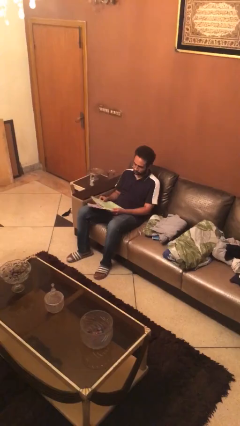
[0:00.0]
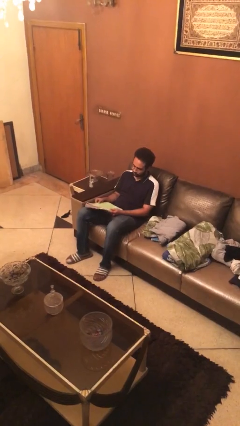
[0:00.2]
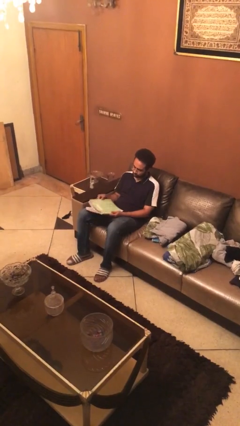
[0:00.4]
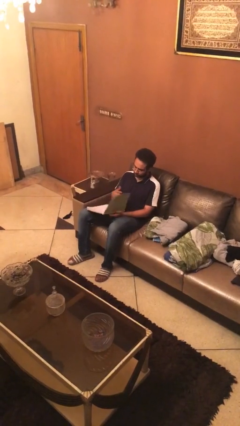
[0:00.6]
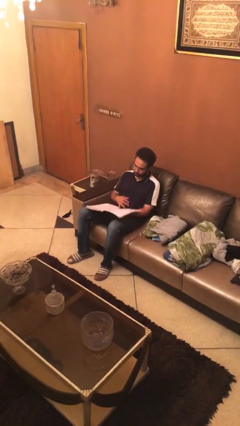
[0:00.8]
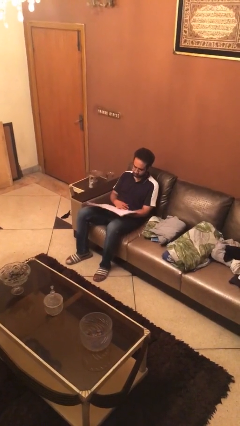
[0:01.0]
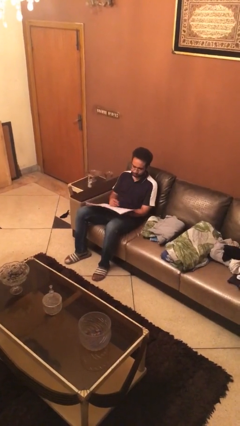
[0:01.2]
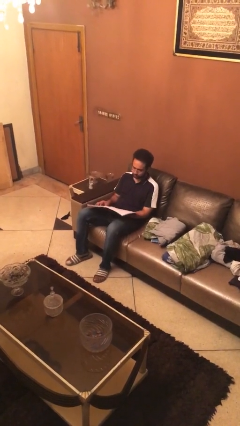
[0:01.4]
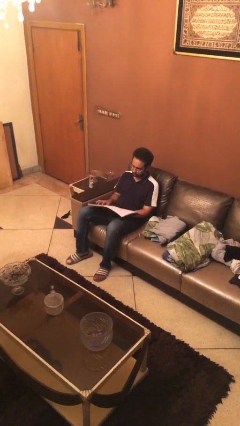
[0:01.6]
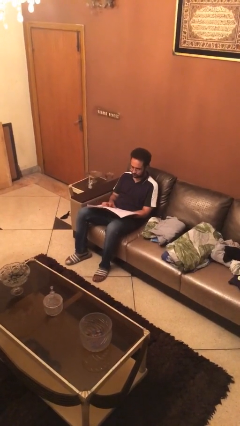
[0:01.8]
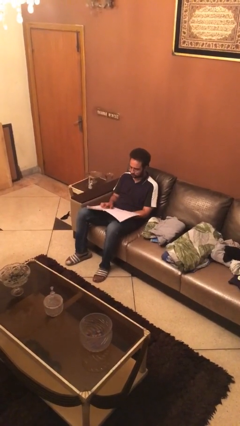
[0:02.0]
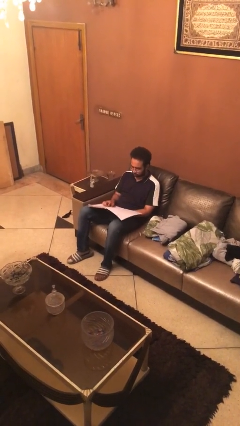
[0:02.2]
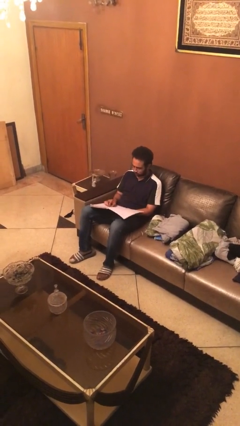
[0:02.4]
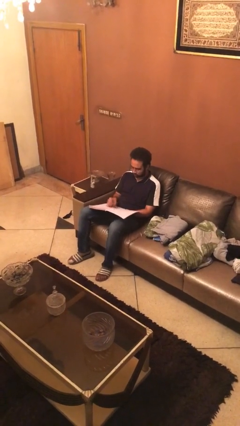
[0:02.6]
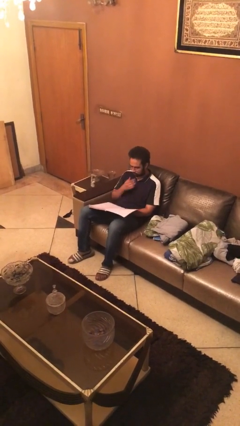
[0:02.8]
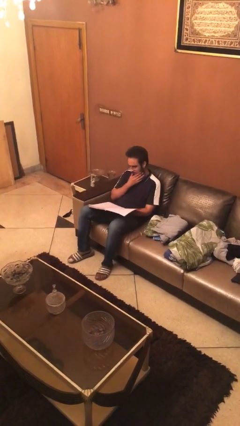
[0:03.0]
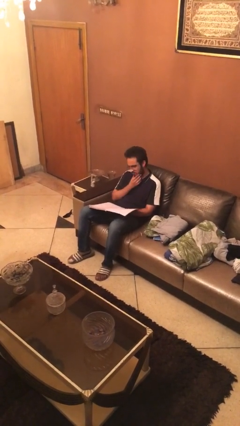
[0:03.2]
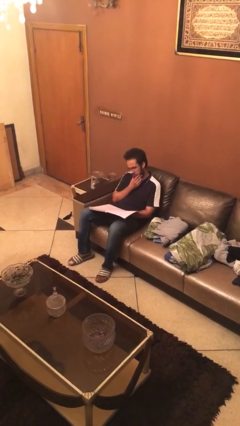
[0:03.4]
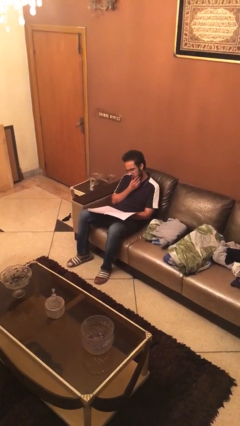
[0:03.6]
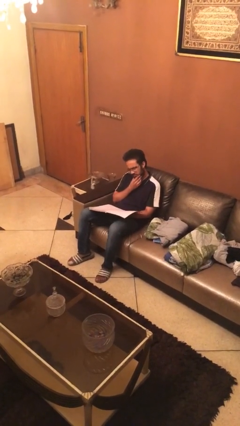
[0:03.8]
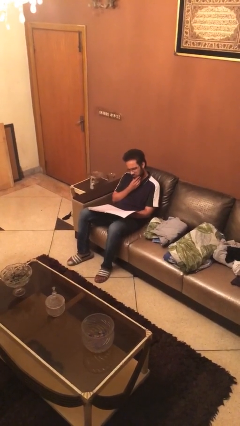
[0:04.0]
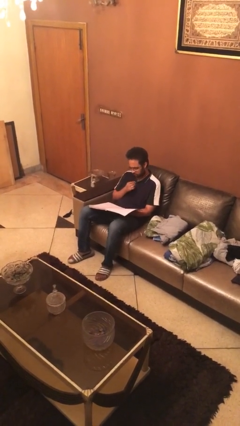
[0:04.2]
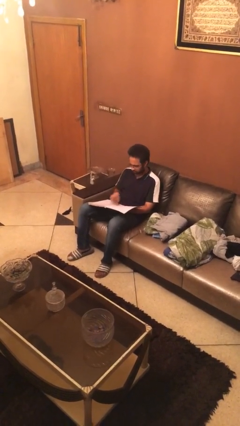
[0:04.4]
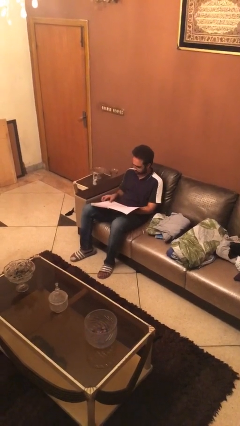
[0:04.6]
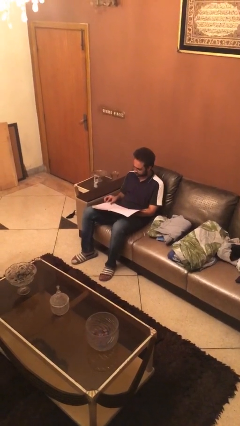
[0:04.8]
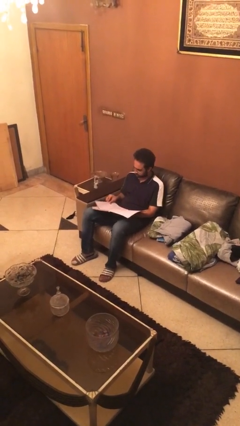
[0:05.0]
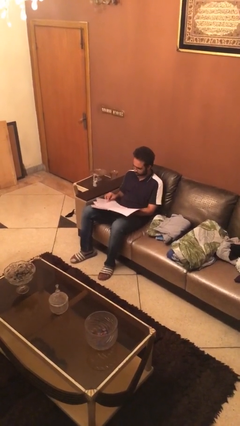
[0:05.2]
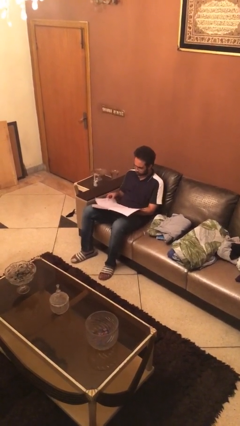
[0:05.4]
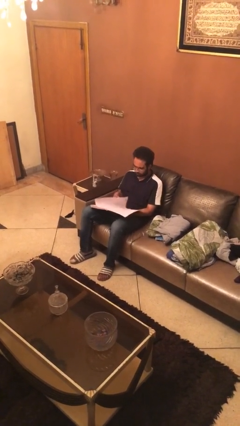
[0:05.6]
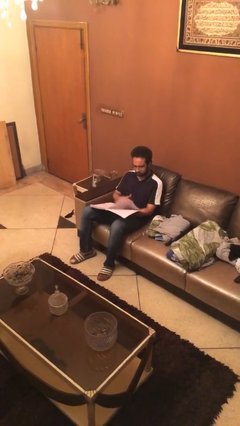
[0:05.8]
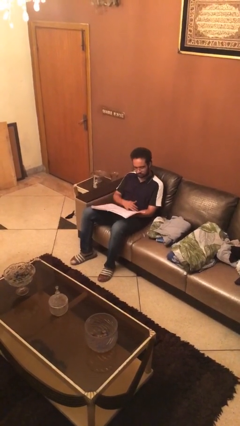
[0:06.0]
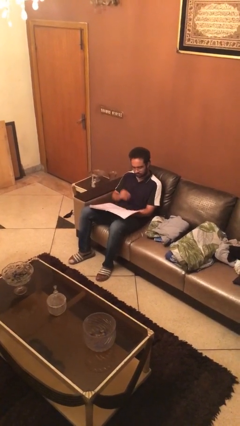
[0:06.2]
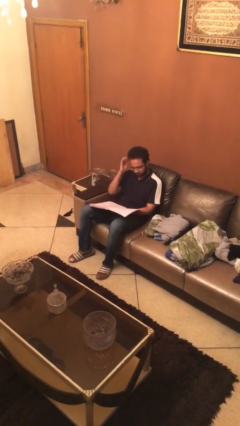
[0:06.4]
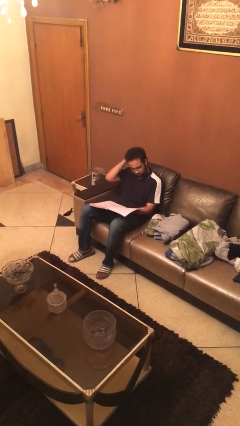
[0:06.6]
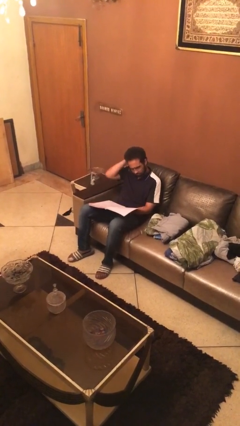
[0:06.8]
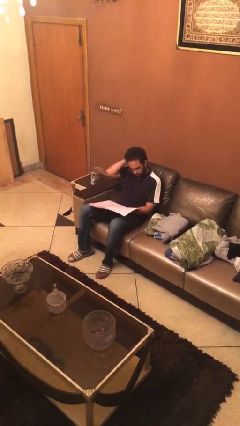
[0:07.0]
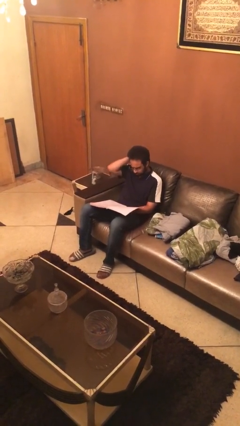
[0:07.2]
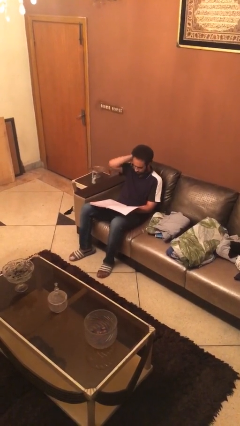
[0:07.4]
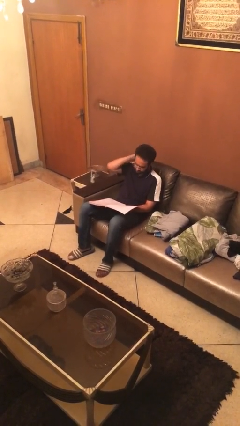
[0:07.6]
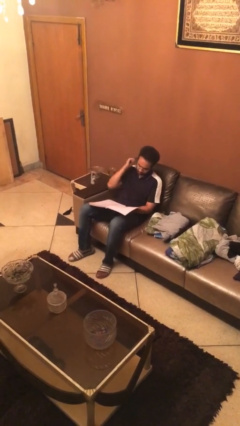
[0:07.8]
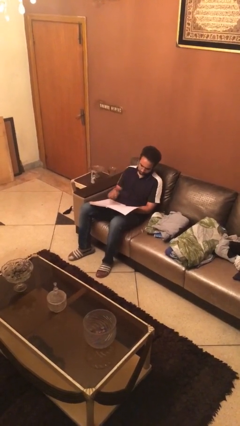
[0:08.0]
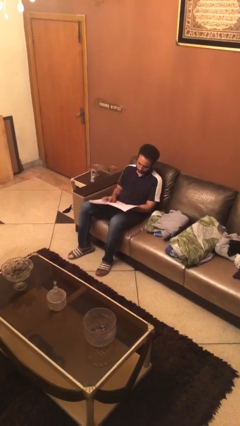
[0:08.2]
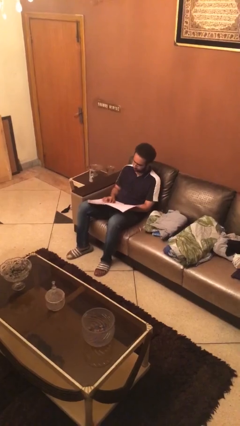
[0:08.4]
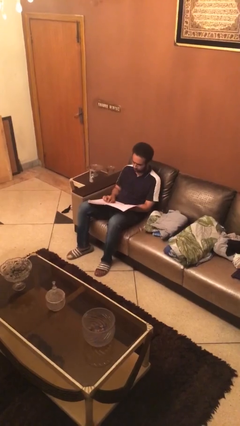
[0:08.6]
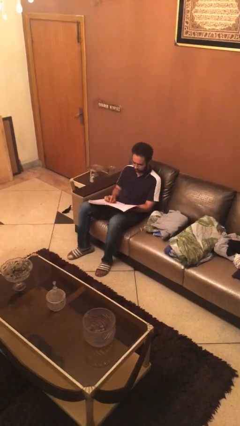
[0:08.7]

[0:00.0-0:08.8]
person reads document

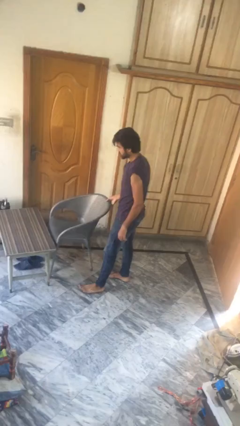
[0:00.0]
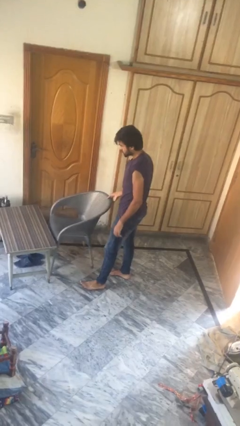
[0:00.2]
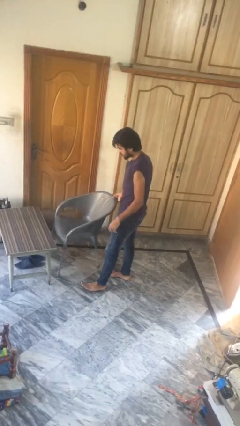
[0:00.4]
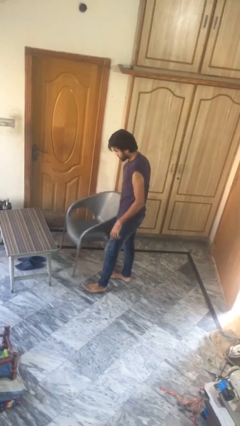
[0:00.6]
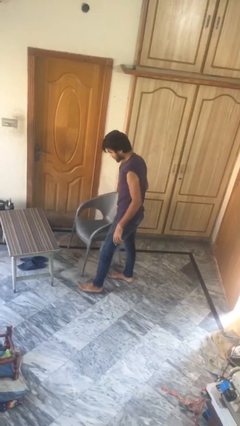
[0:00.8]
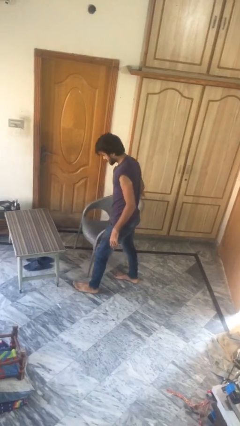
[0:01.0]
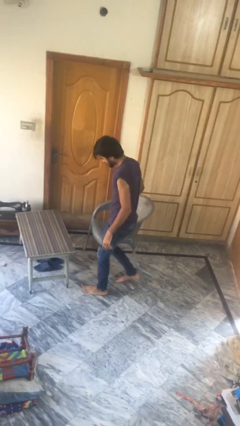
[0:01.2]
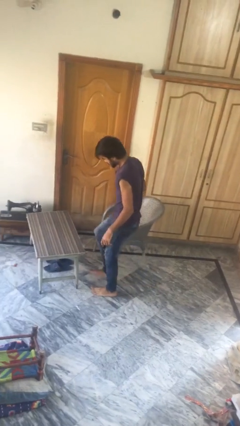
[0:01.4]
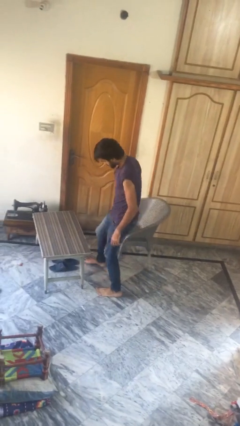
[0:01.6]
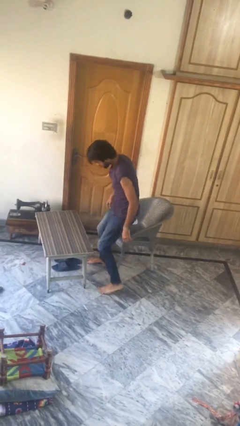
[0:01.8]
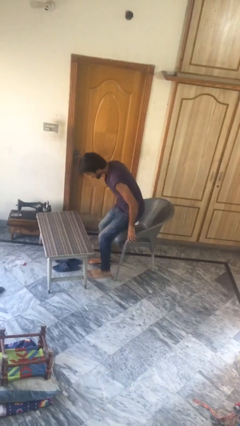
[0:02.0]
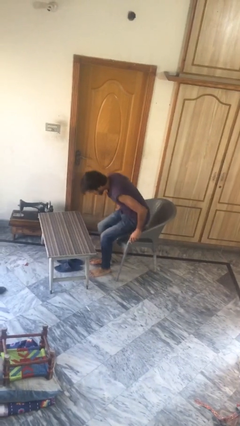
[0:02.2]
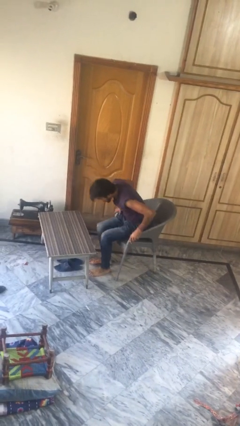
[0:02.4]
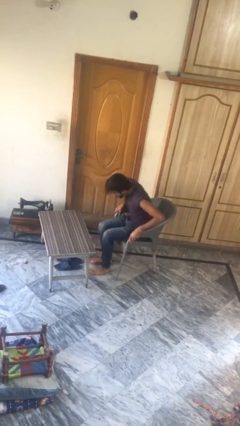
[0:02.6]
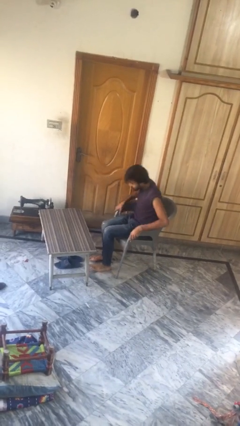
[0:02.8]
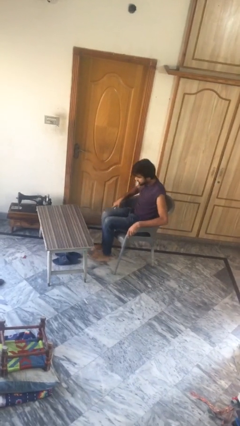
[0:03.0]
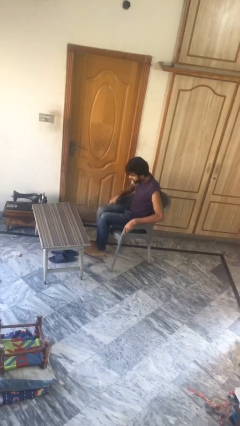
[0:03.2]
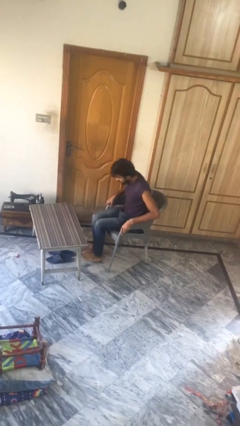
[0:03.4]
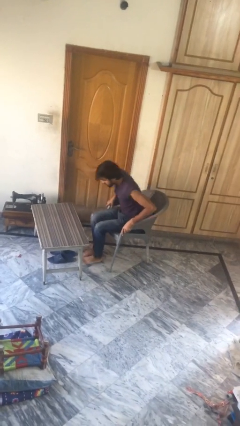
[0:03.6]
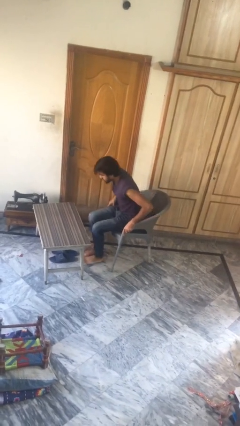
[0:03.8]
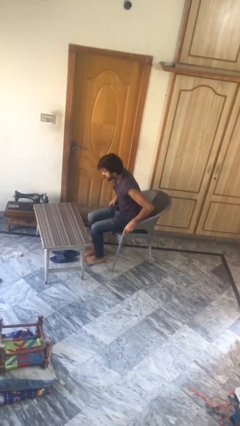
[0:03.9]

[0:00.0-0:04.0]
person sits down

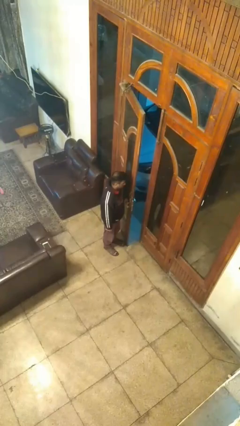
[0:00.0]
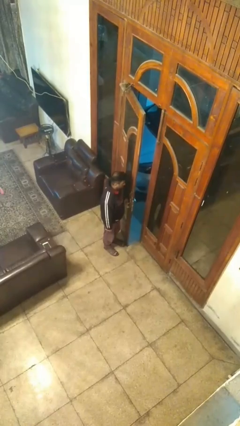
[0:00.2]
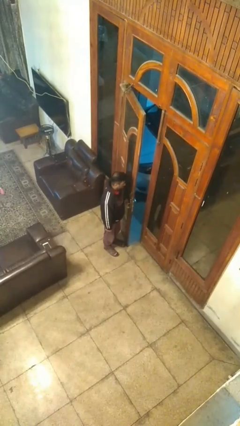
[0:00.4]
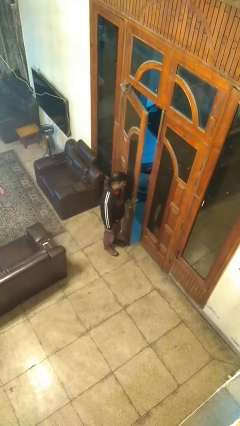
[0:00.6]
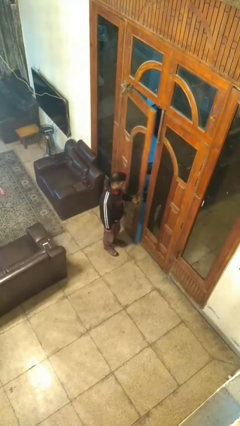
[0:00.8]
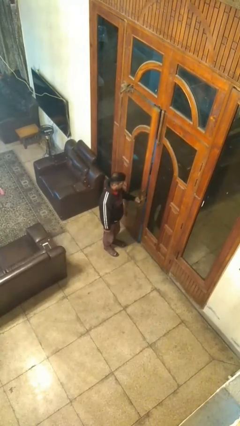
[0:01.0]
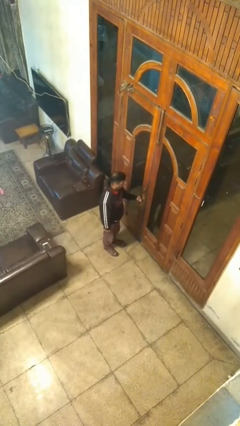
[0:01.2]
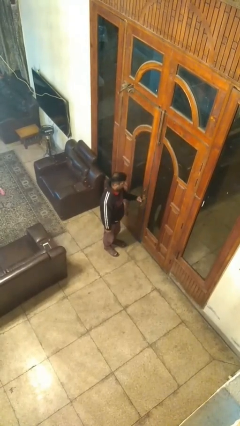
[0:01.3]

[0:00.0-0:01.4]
person closes facility door

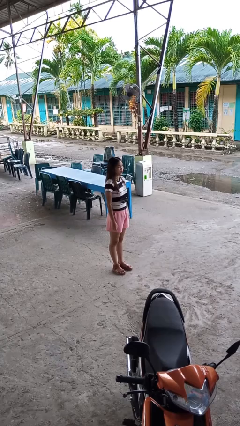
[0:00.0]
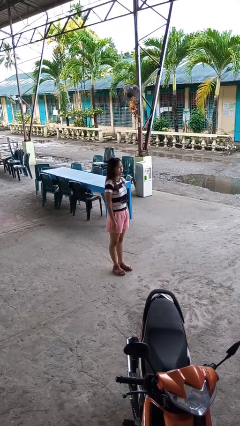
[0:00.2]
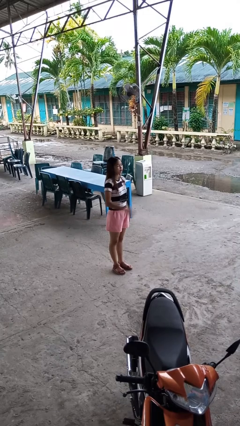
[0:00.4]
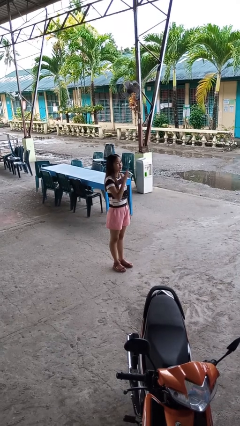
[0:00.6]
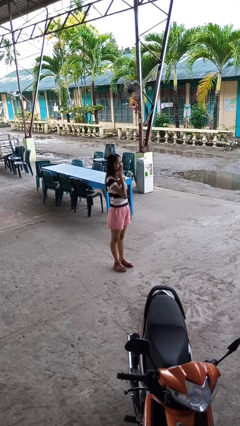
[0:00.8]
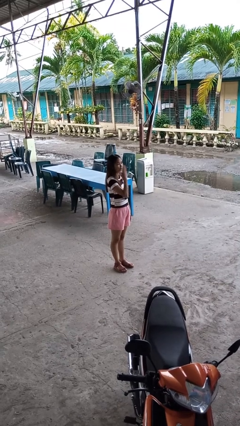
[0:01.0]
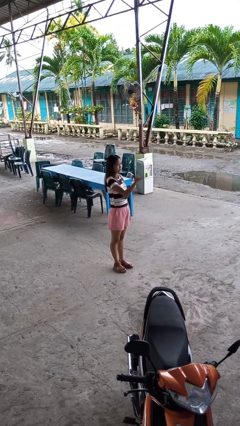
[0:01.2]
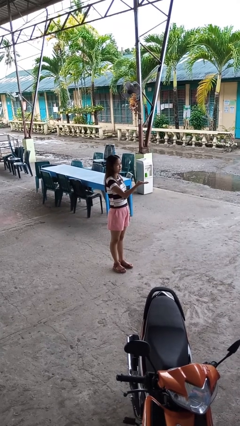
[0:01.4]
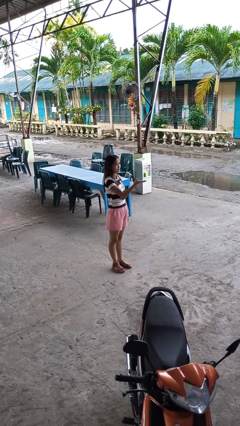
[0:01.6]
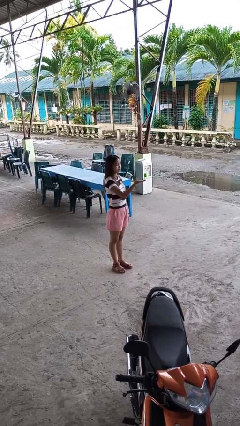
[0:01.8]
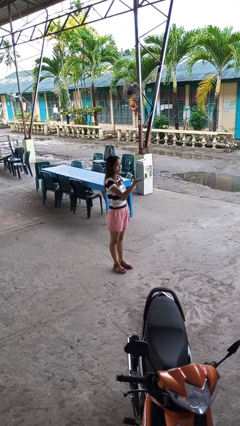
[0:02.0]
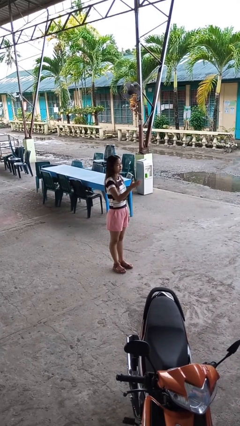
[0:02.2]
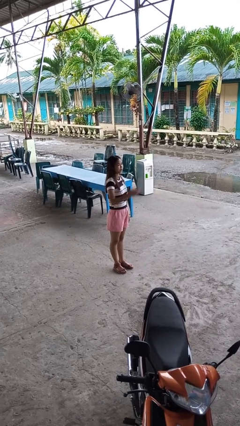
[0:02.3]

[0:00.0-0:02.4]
person gestures blow kiss

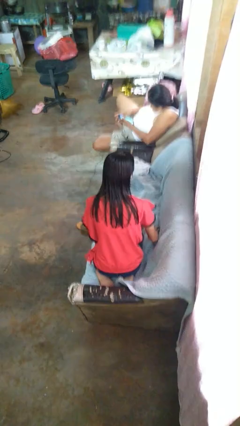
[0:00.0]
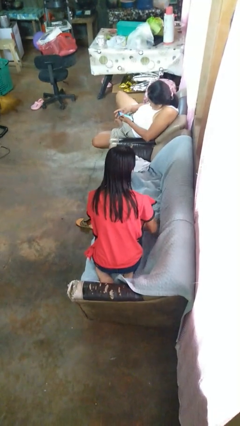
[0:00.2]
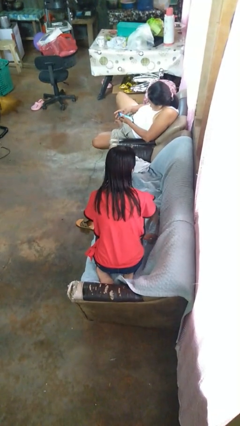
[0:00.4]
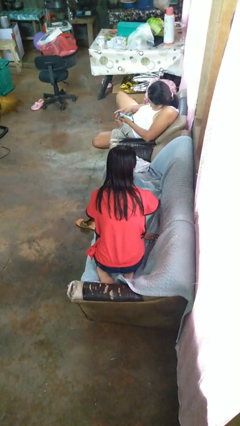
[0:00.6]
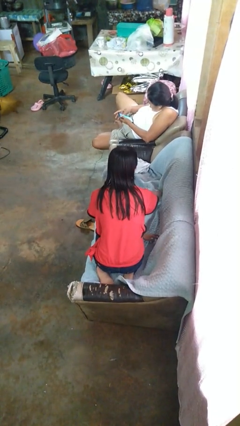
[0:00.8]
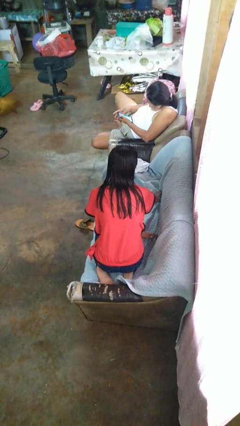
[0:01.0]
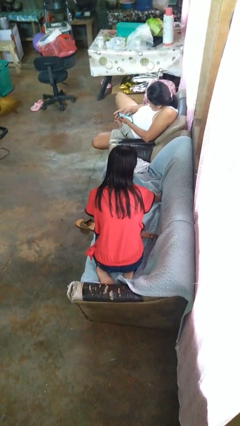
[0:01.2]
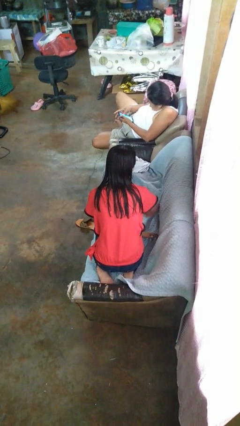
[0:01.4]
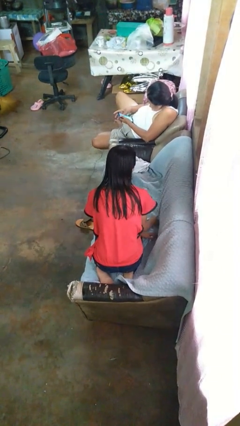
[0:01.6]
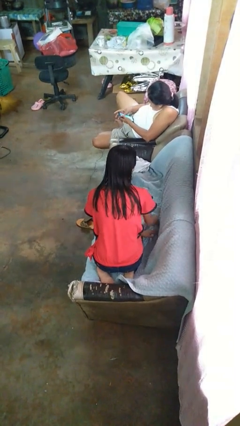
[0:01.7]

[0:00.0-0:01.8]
person searches in couch
